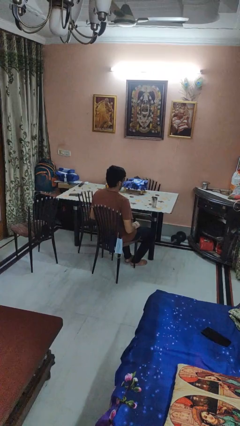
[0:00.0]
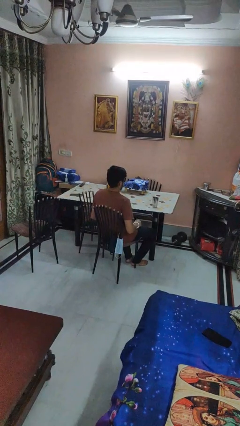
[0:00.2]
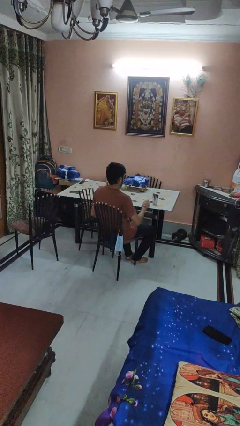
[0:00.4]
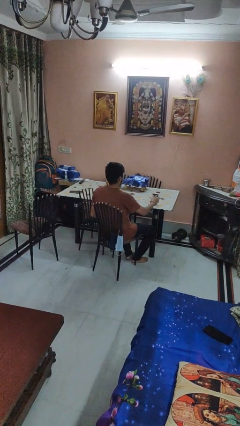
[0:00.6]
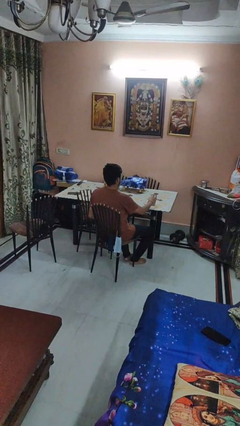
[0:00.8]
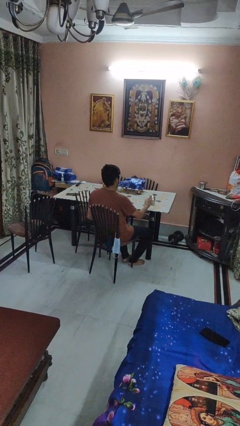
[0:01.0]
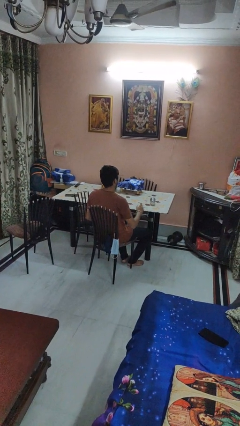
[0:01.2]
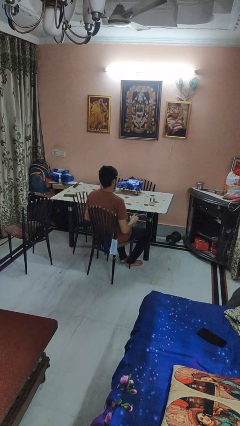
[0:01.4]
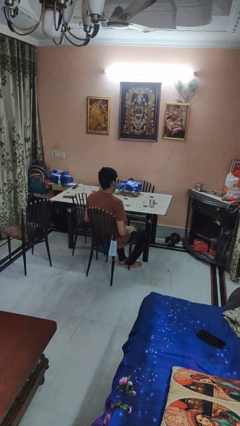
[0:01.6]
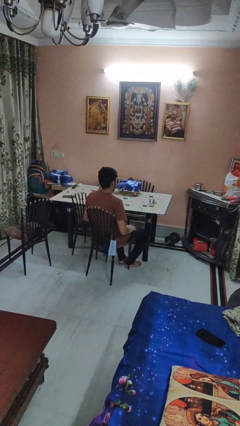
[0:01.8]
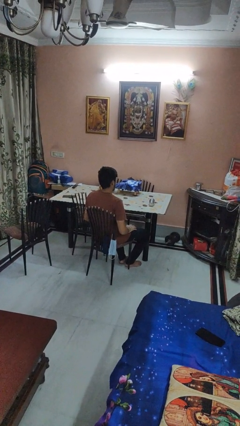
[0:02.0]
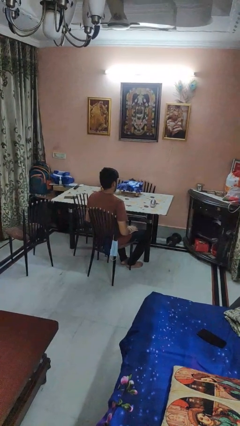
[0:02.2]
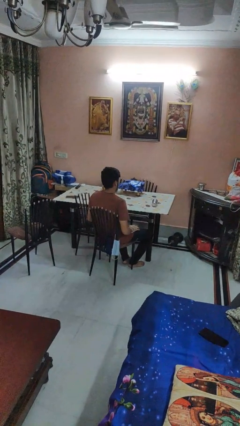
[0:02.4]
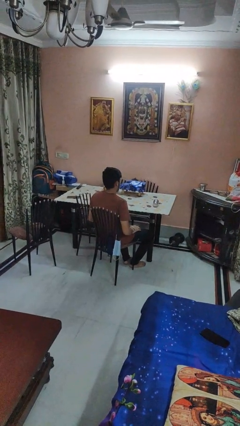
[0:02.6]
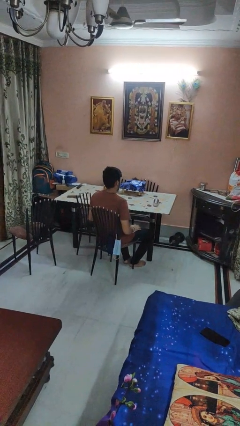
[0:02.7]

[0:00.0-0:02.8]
person knocks over glass

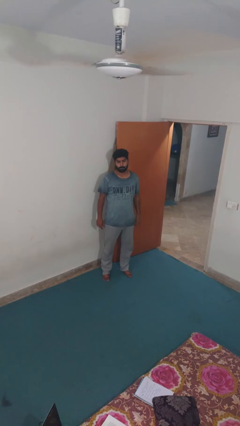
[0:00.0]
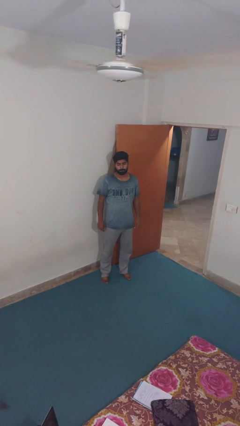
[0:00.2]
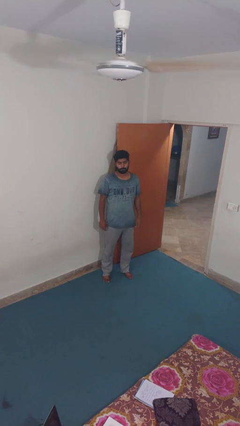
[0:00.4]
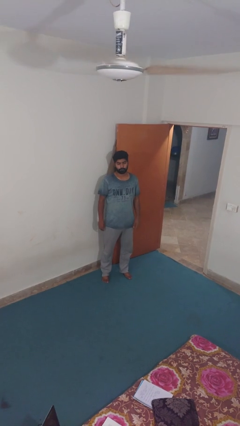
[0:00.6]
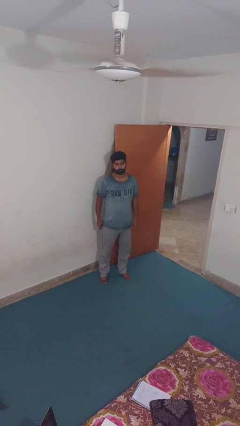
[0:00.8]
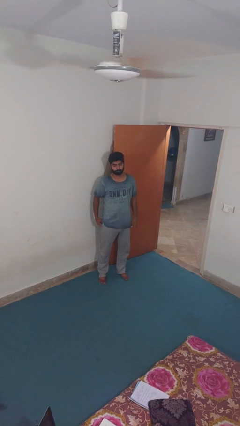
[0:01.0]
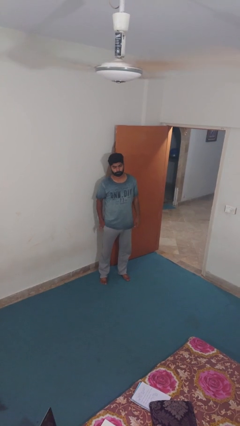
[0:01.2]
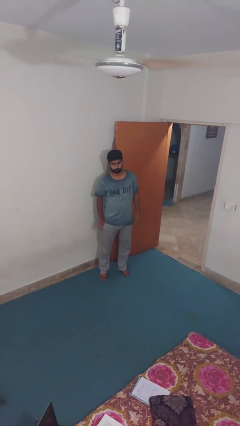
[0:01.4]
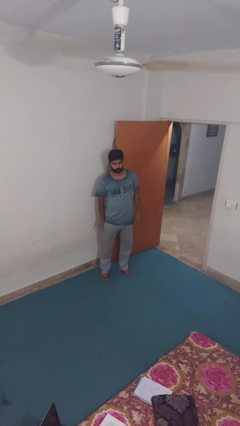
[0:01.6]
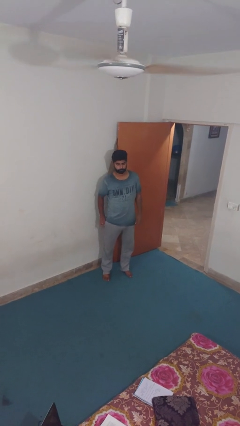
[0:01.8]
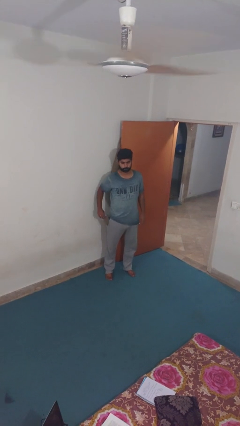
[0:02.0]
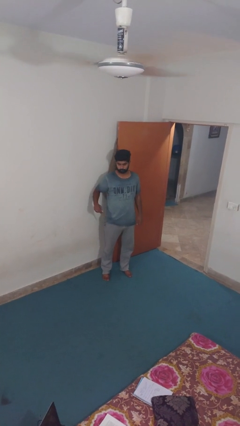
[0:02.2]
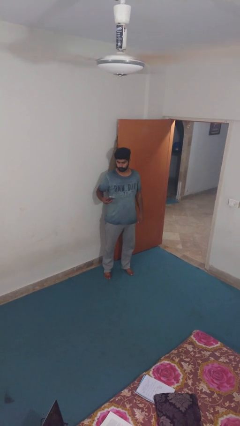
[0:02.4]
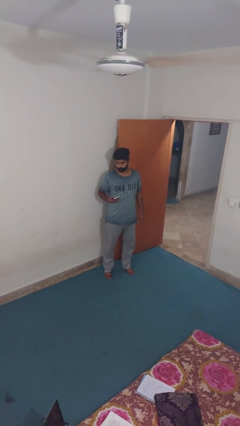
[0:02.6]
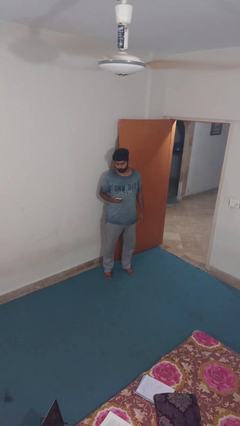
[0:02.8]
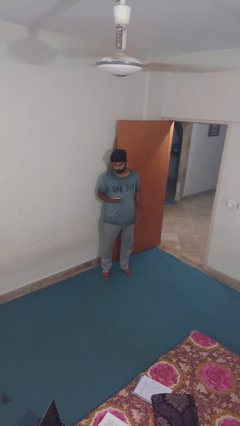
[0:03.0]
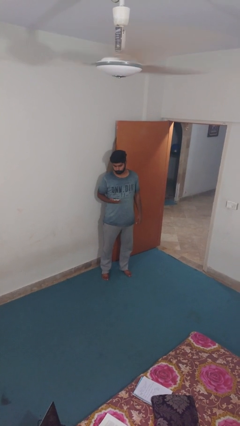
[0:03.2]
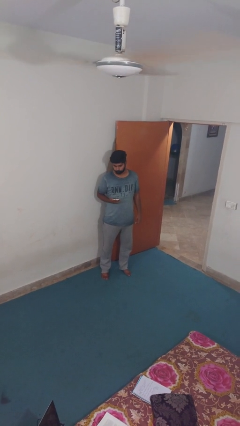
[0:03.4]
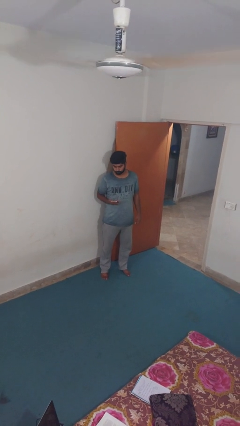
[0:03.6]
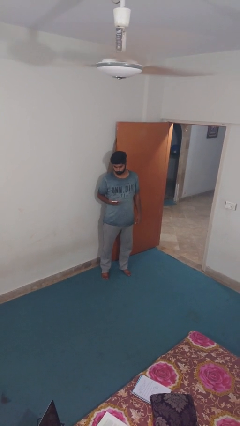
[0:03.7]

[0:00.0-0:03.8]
person takes phone from pocket

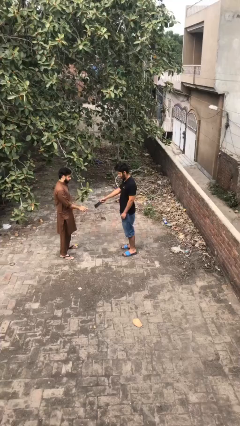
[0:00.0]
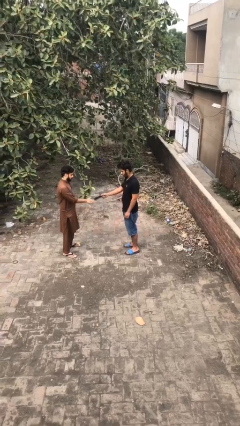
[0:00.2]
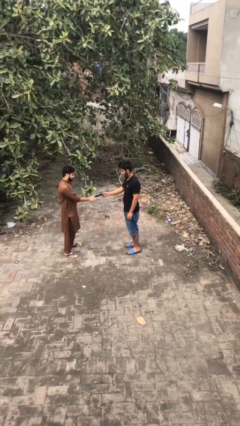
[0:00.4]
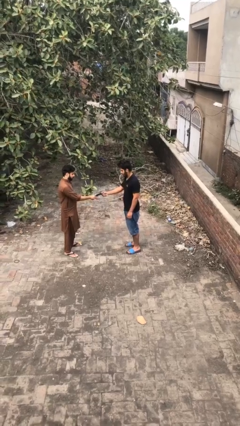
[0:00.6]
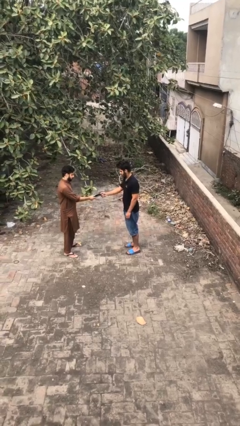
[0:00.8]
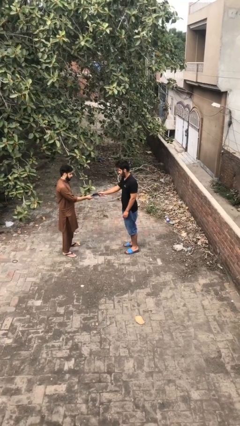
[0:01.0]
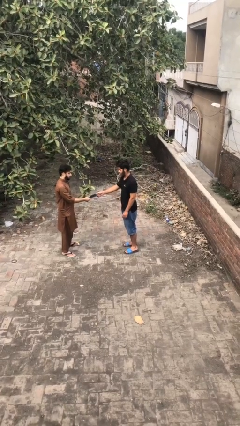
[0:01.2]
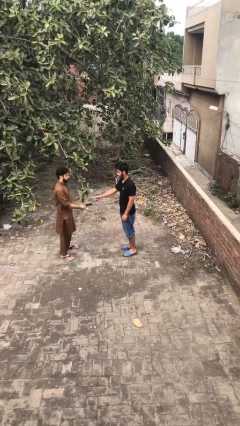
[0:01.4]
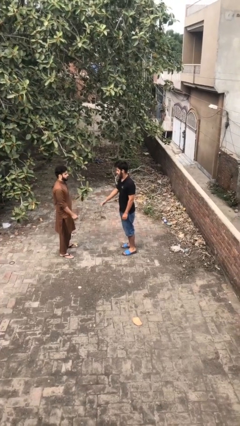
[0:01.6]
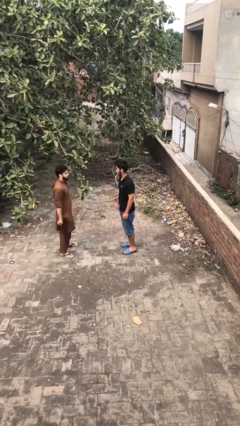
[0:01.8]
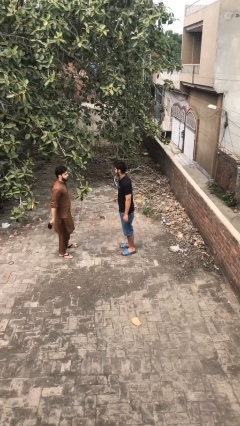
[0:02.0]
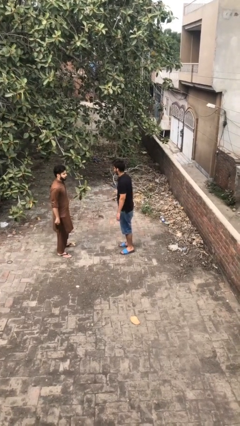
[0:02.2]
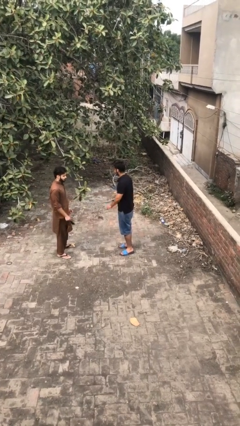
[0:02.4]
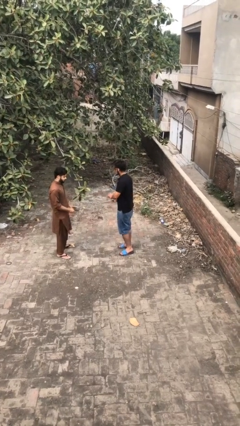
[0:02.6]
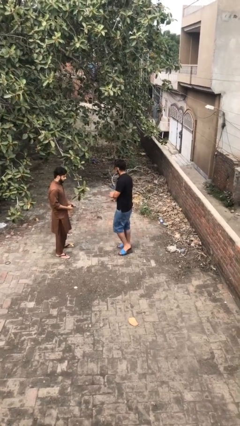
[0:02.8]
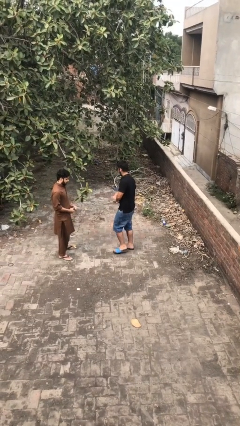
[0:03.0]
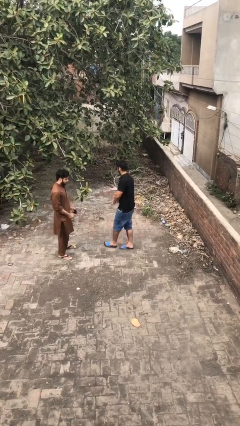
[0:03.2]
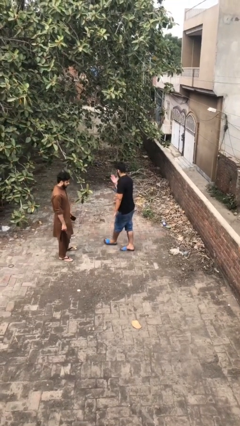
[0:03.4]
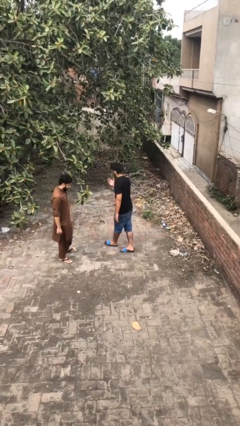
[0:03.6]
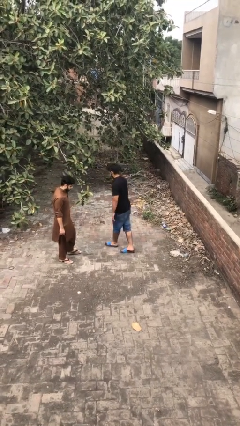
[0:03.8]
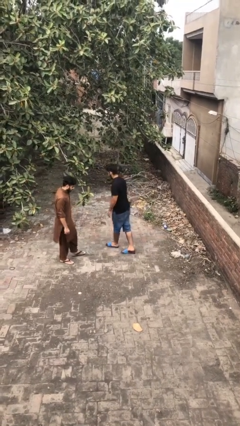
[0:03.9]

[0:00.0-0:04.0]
person transfers object to person

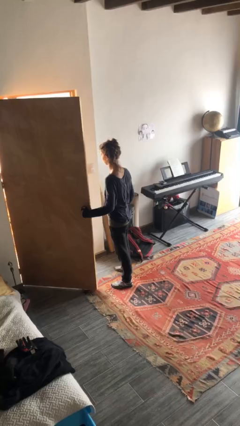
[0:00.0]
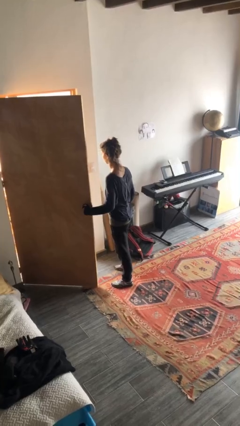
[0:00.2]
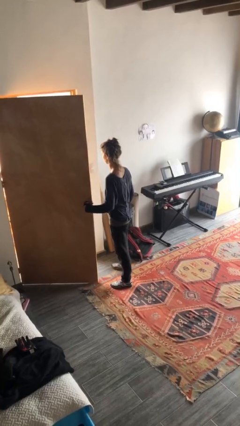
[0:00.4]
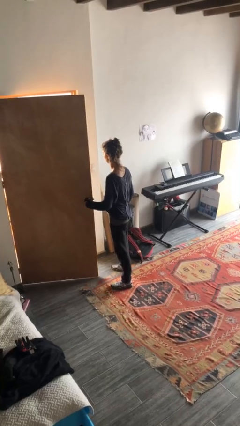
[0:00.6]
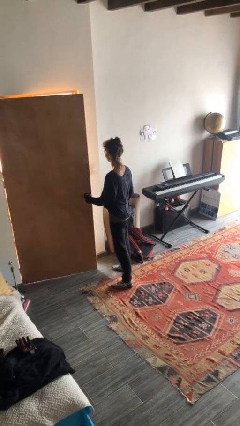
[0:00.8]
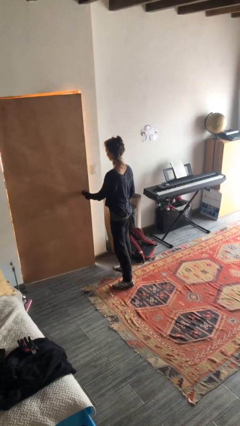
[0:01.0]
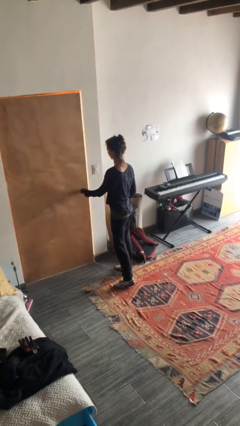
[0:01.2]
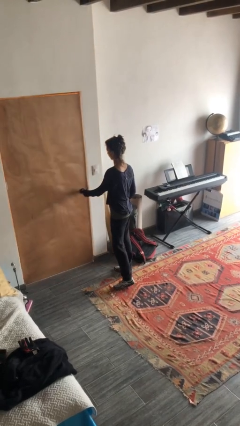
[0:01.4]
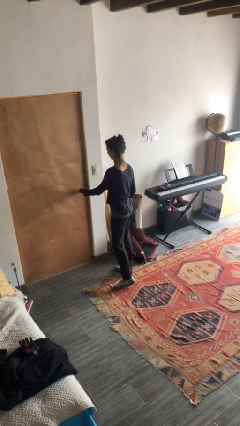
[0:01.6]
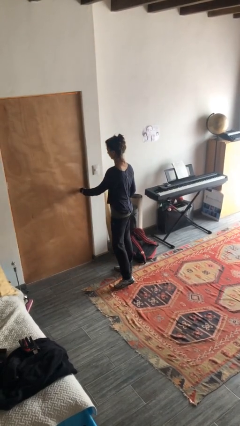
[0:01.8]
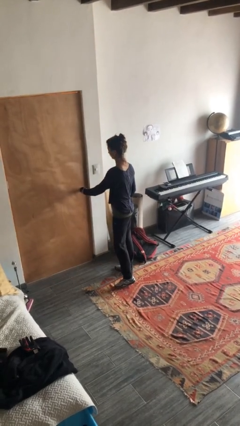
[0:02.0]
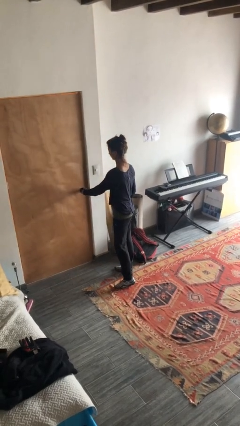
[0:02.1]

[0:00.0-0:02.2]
person closes facility door

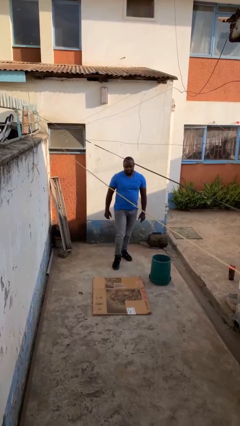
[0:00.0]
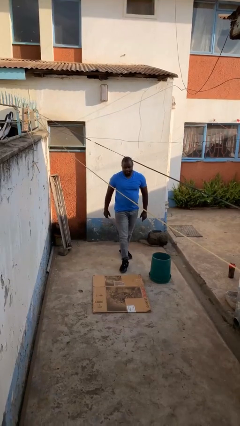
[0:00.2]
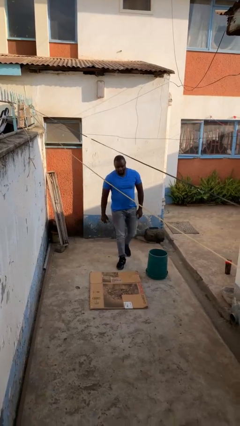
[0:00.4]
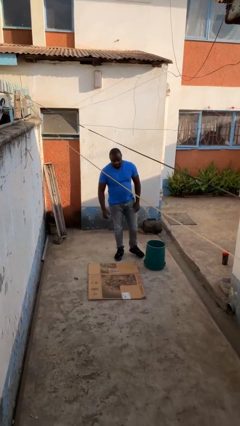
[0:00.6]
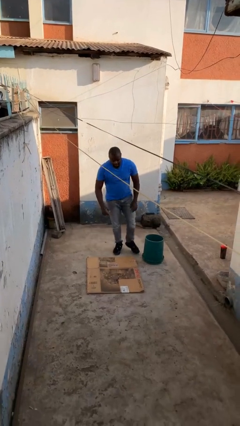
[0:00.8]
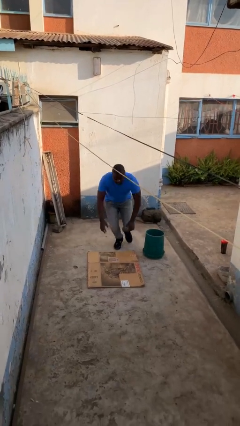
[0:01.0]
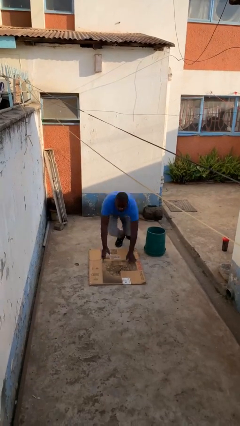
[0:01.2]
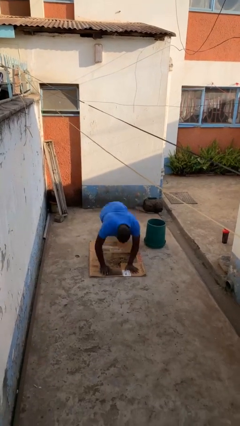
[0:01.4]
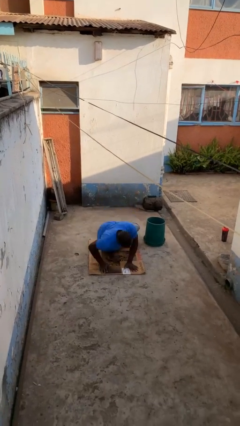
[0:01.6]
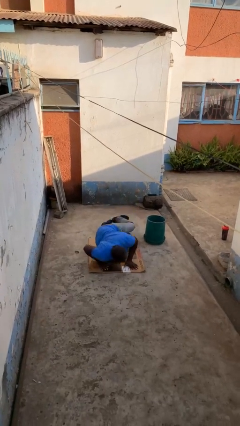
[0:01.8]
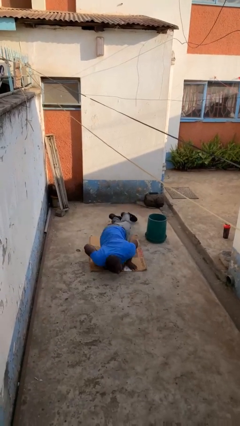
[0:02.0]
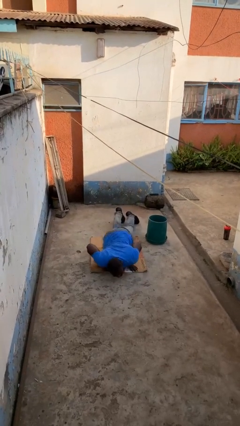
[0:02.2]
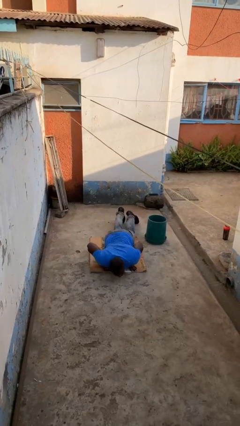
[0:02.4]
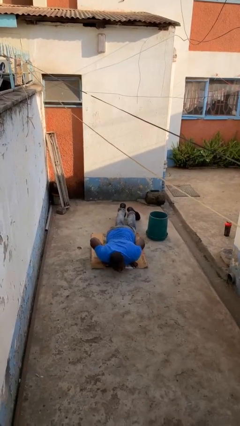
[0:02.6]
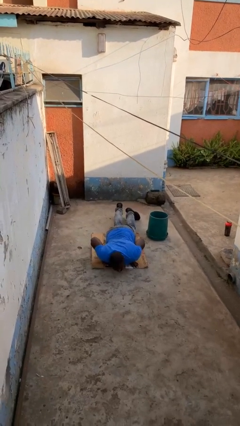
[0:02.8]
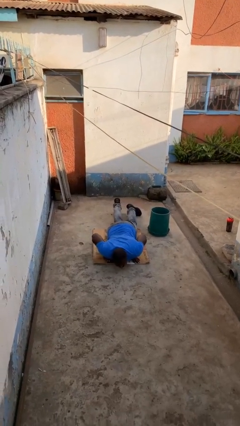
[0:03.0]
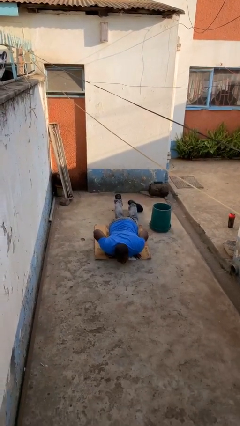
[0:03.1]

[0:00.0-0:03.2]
person trips on object on floor

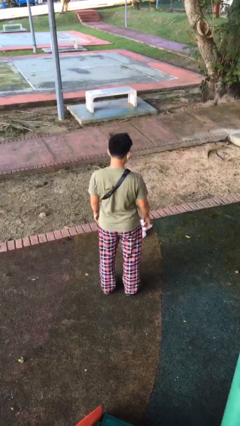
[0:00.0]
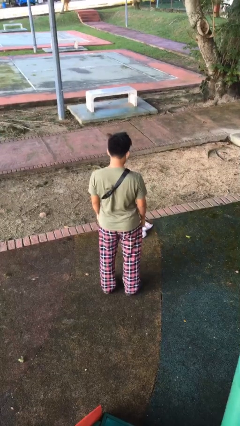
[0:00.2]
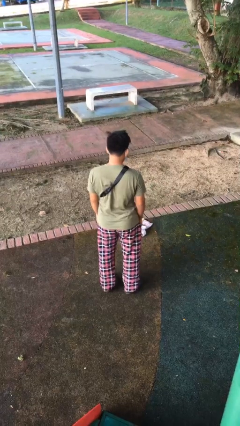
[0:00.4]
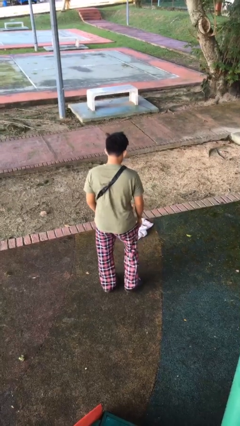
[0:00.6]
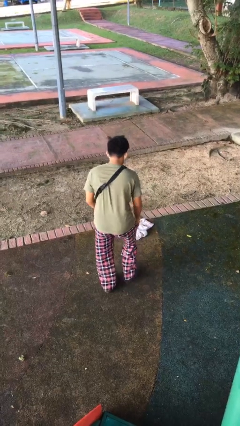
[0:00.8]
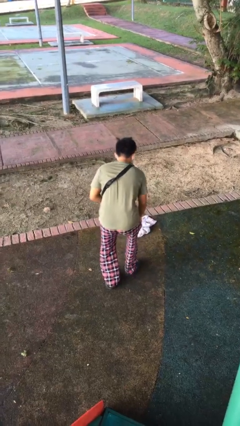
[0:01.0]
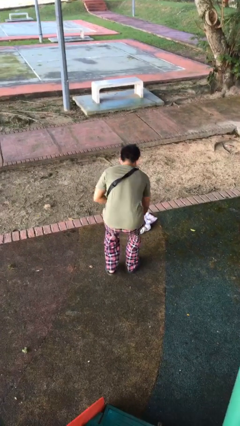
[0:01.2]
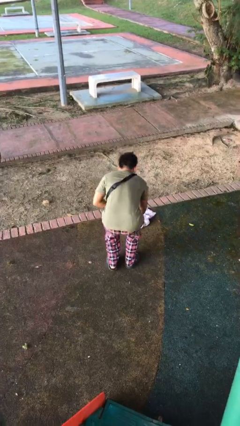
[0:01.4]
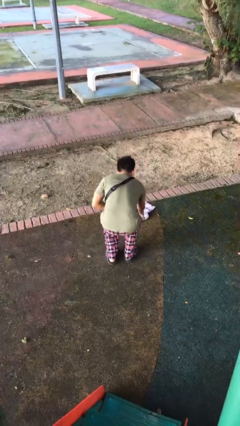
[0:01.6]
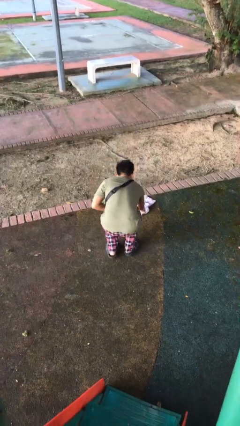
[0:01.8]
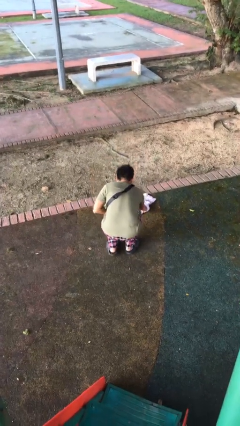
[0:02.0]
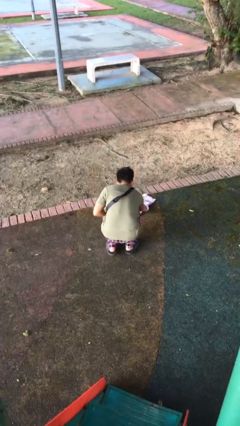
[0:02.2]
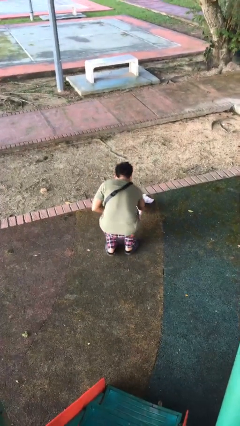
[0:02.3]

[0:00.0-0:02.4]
person picks up object from floor
